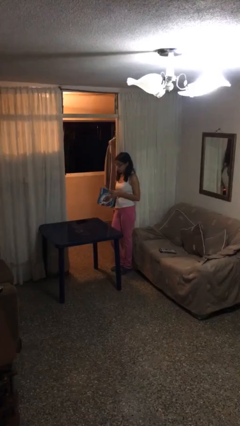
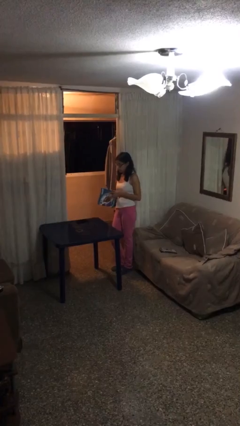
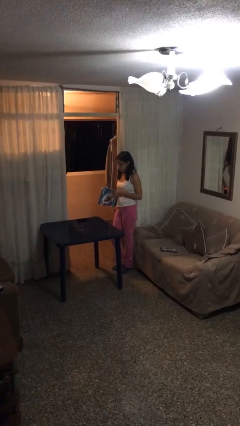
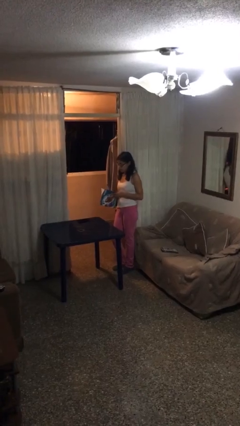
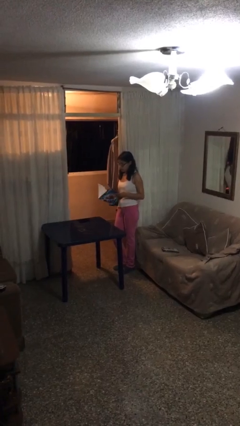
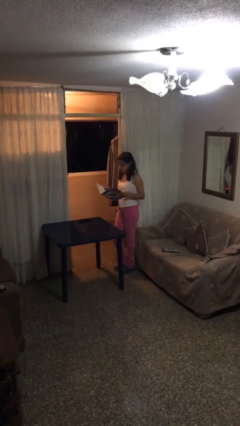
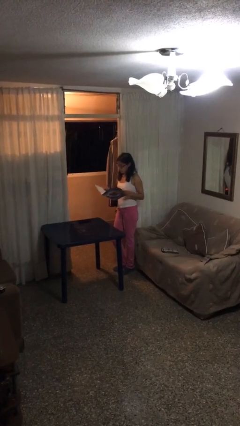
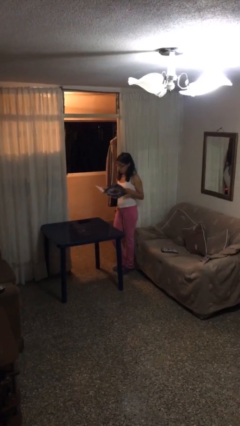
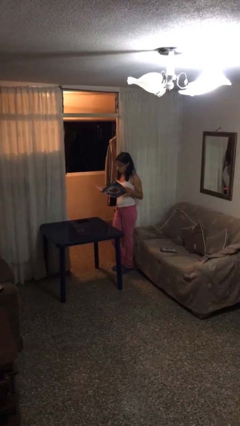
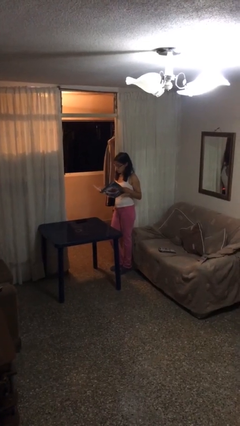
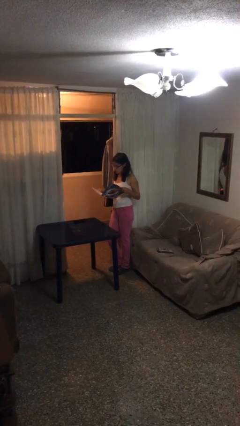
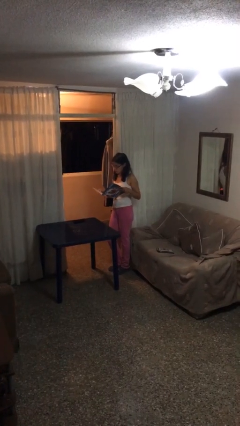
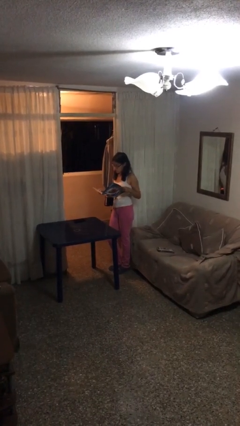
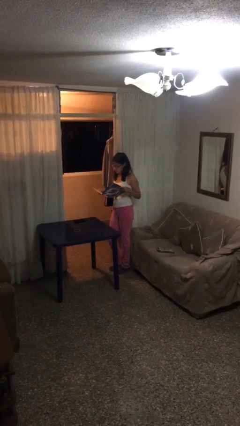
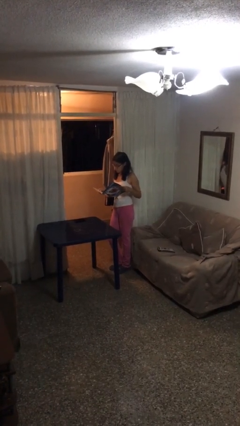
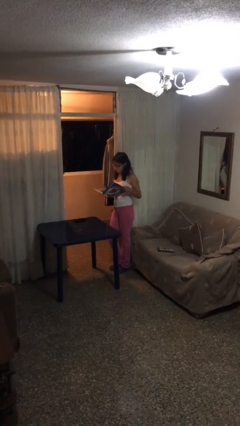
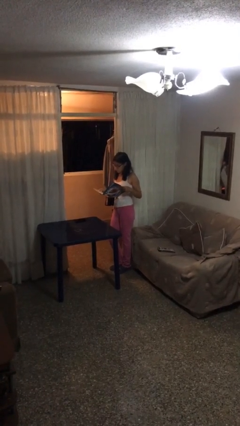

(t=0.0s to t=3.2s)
person reads document

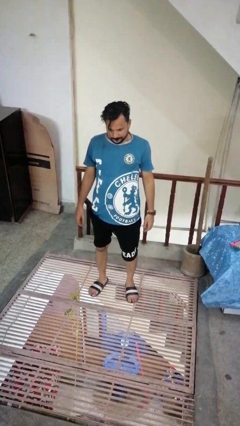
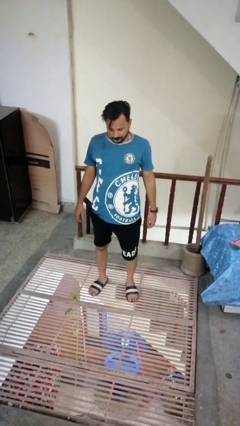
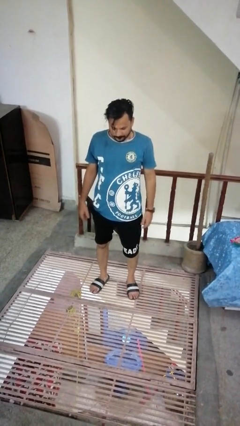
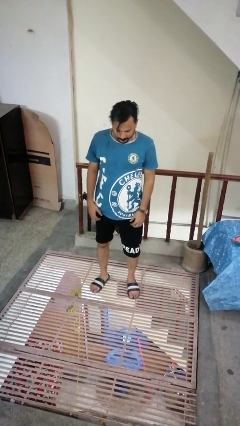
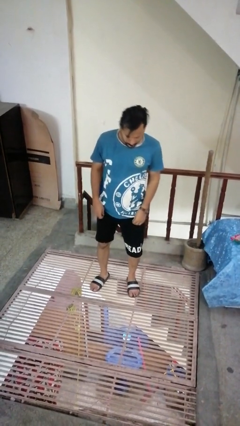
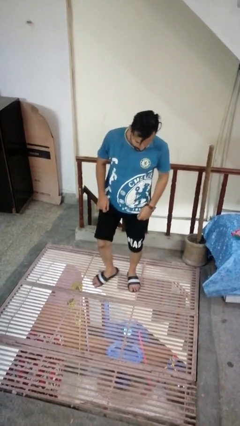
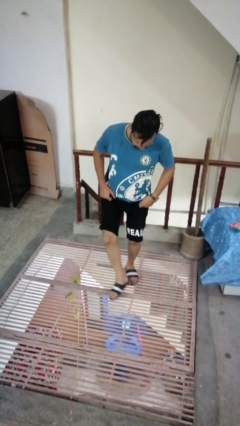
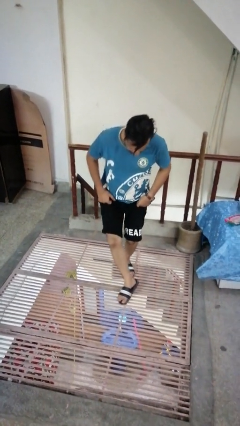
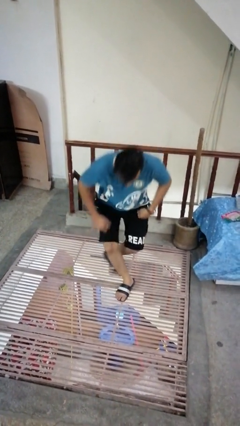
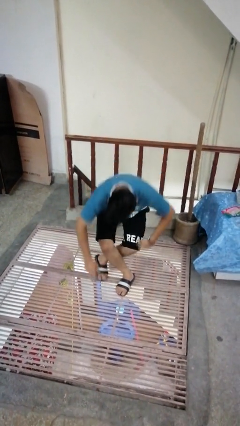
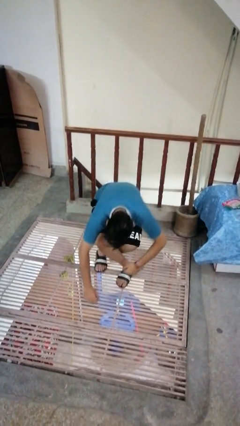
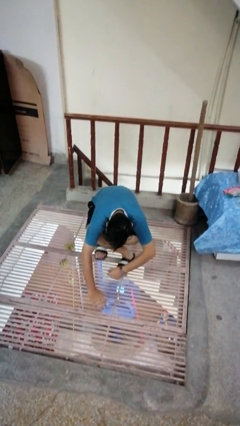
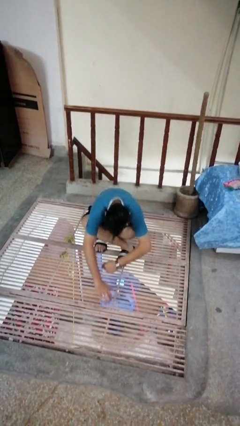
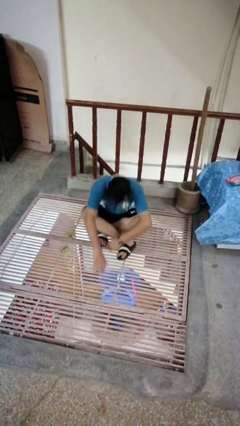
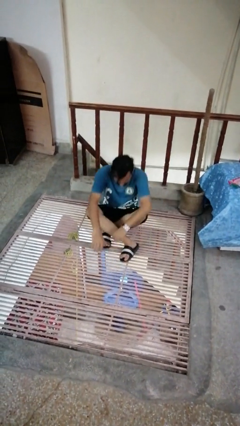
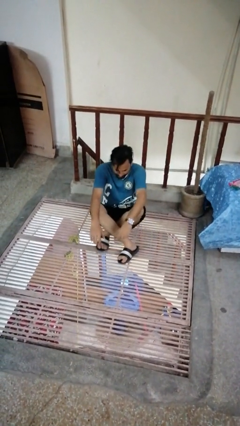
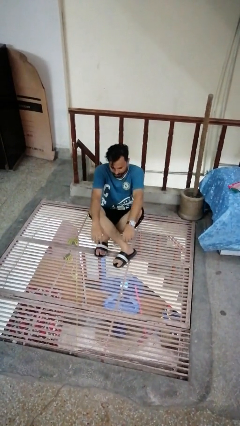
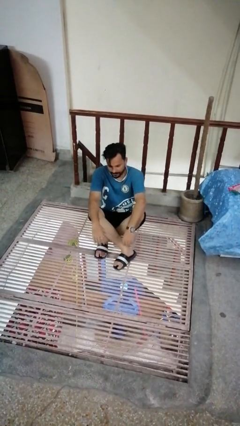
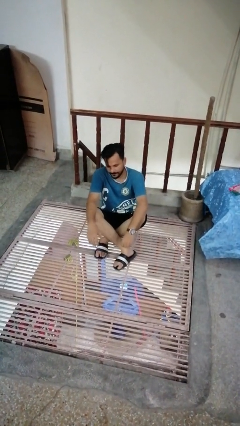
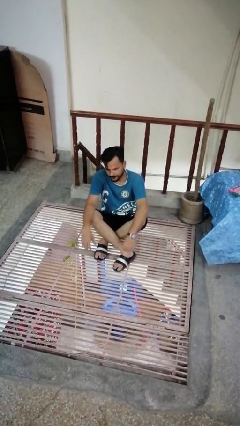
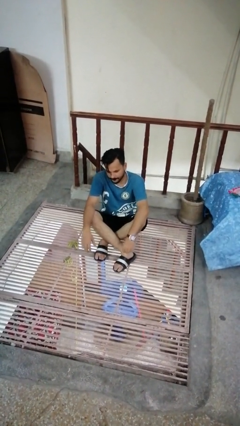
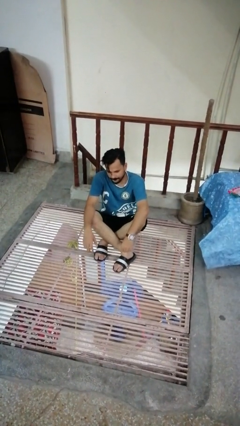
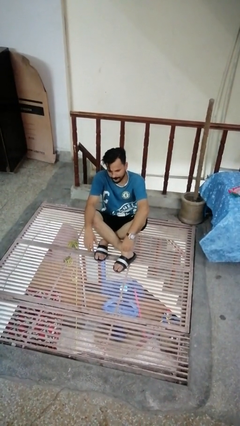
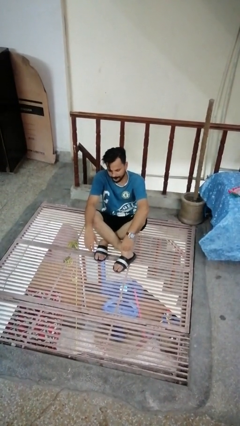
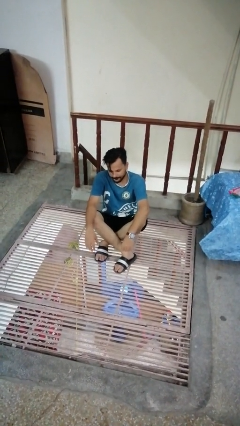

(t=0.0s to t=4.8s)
person sits crisscross

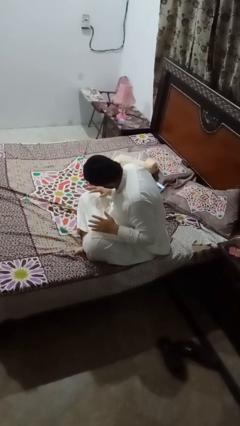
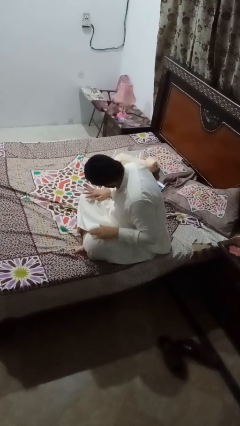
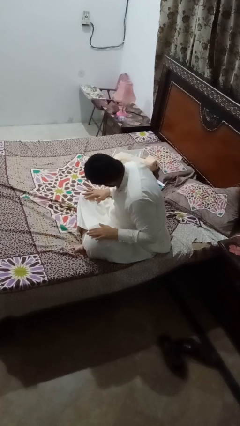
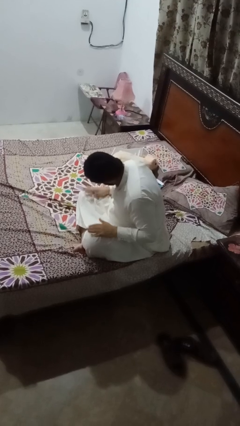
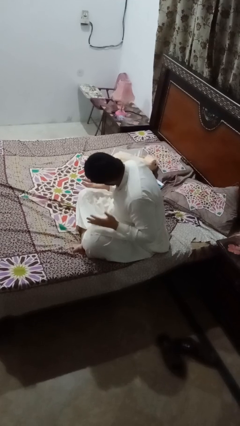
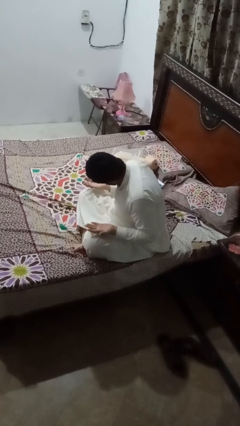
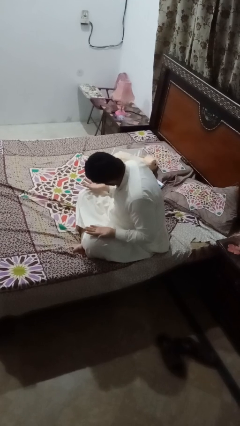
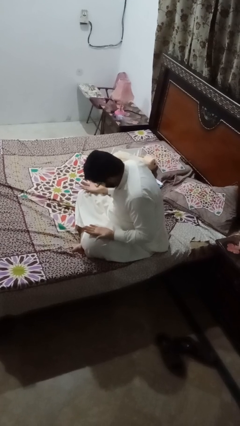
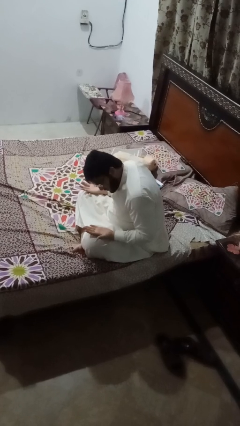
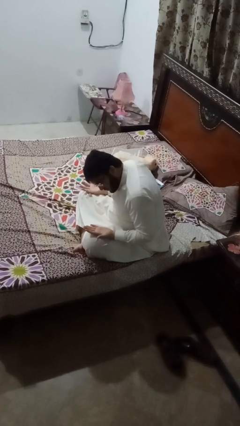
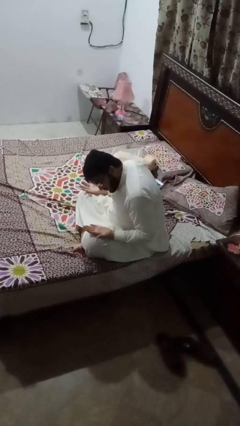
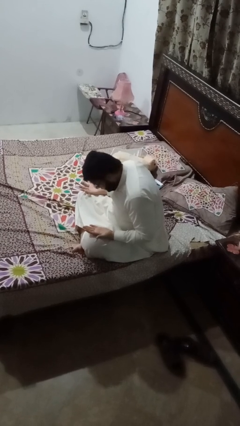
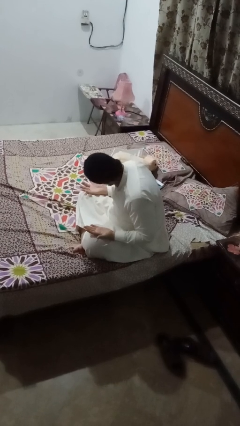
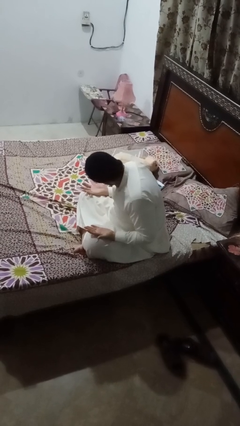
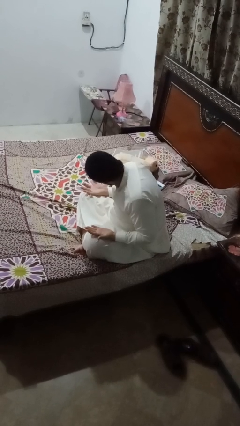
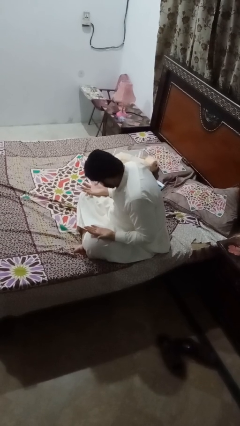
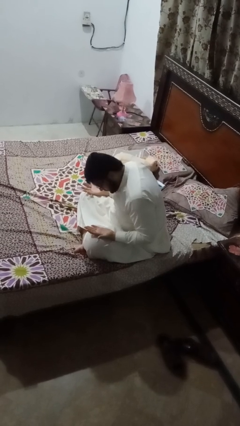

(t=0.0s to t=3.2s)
person looks at hands in lap

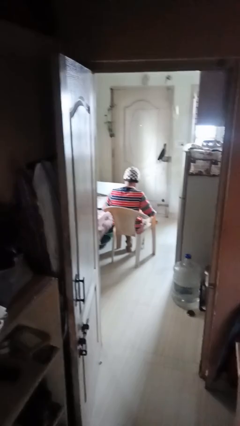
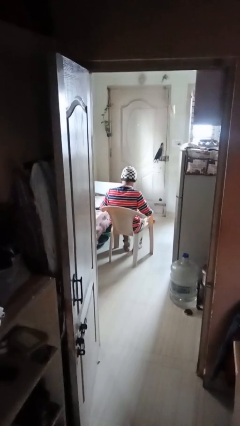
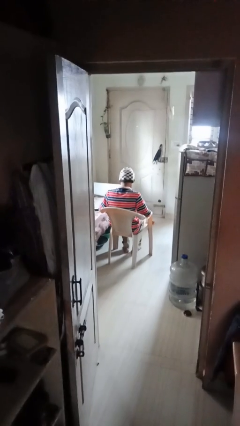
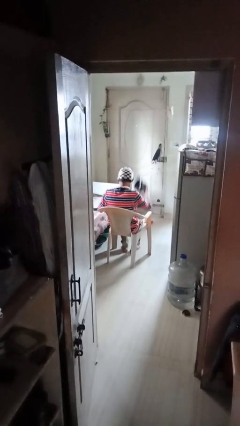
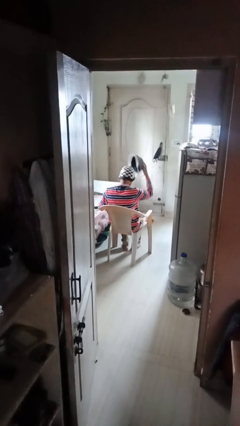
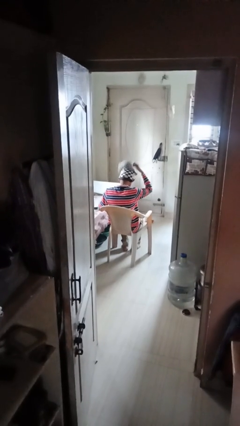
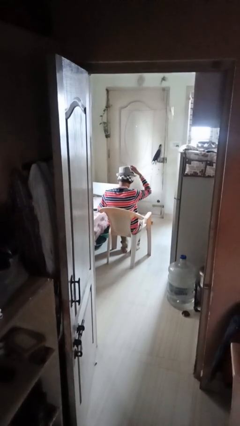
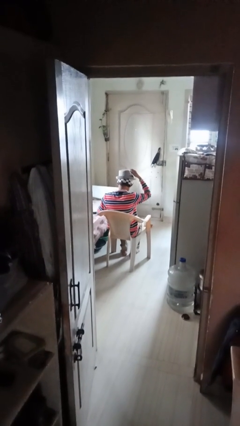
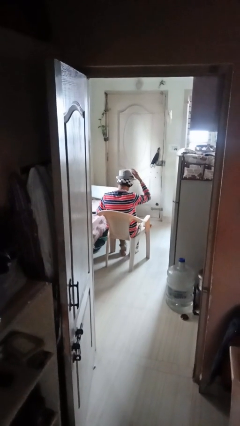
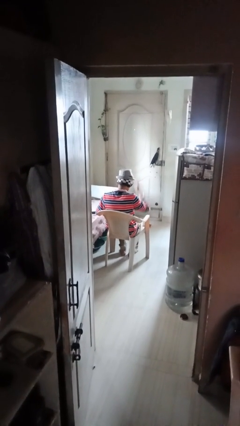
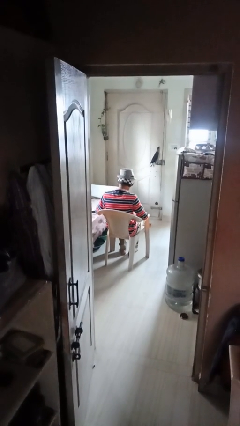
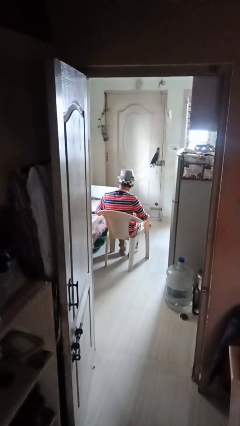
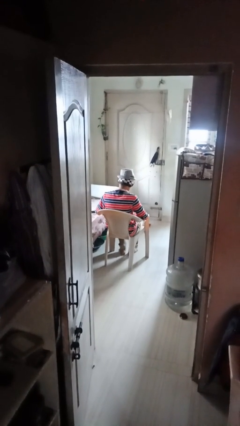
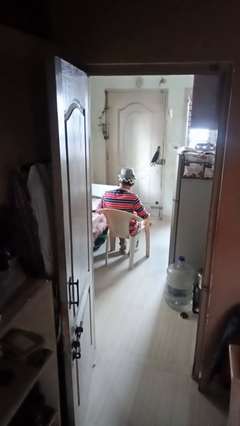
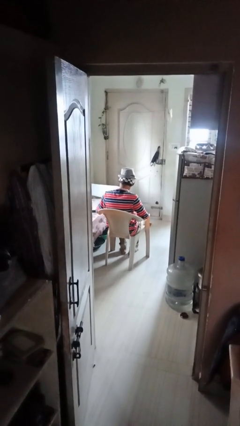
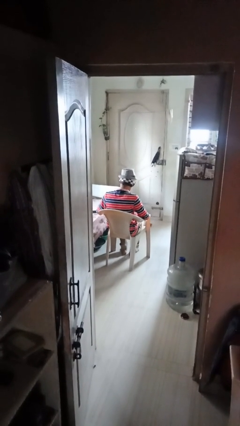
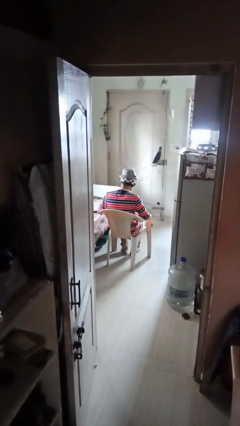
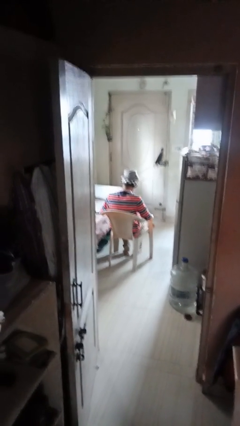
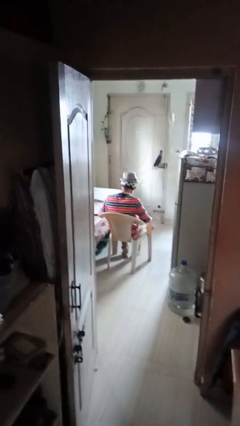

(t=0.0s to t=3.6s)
person puts on hat

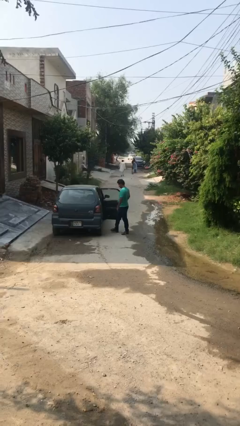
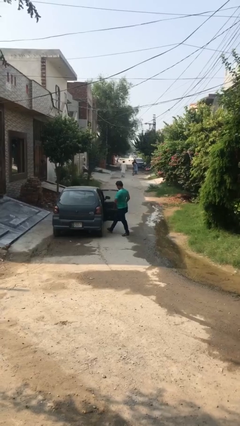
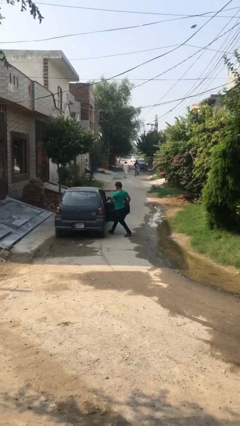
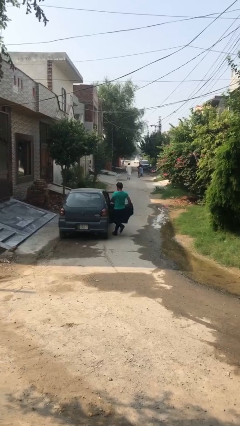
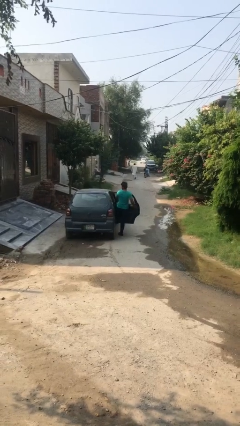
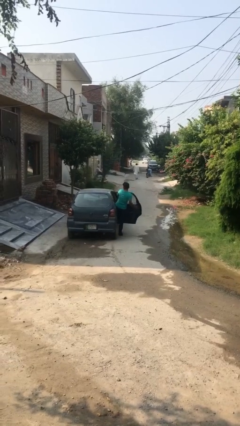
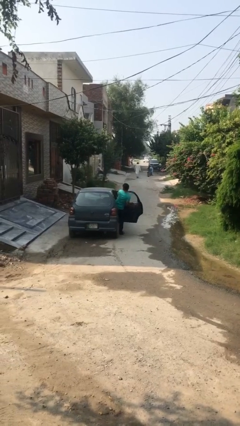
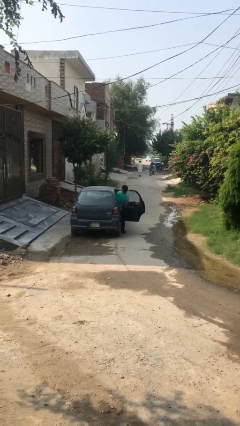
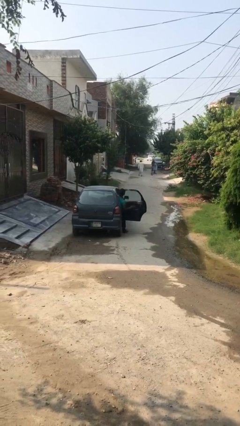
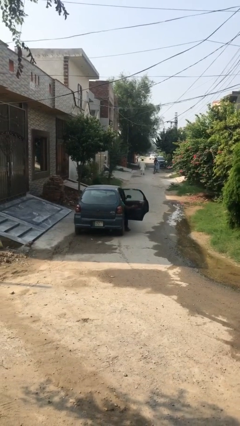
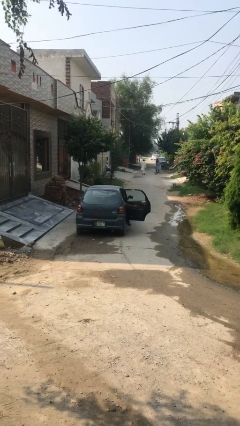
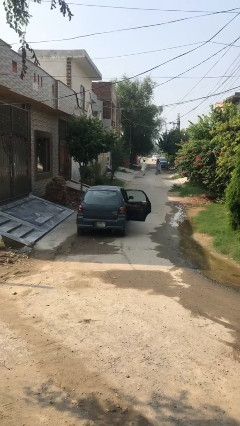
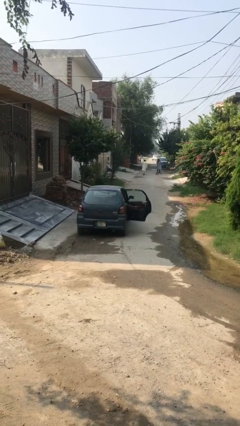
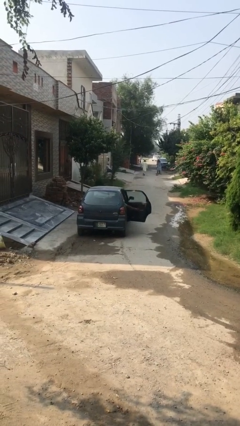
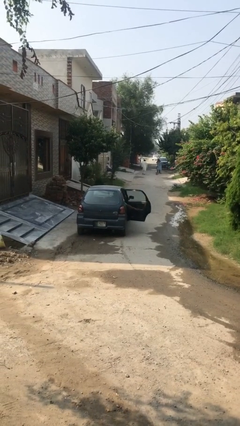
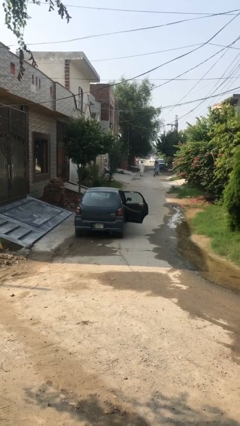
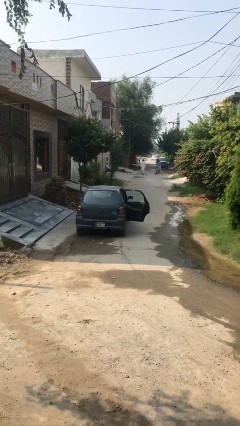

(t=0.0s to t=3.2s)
person enters car
